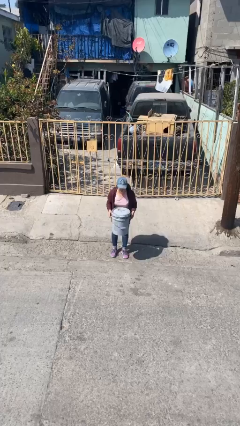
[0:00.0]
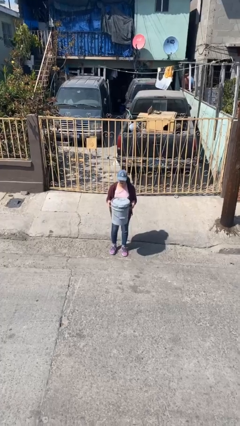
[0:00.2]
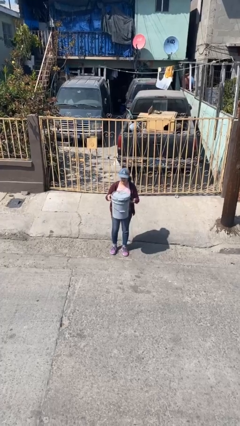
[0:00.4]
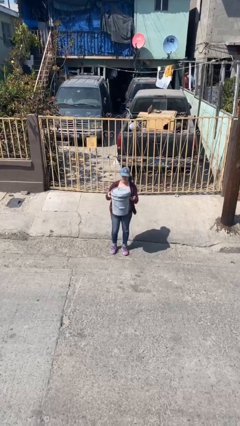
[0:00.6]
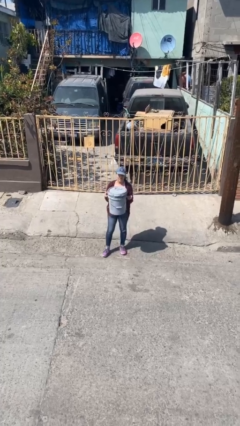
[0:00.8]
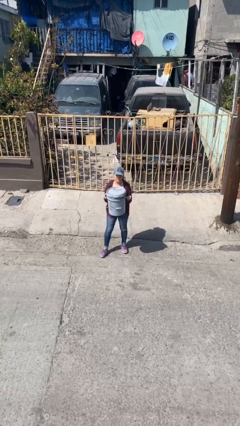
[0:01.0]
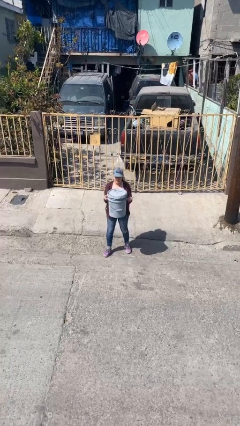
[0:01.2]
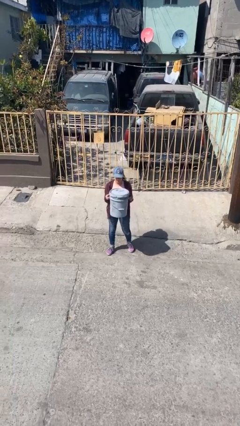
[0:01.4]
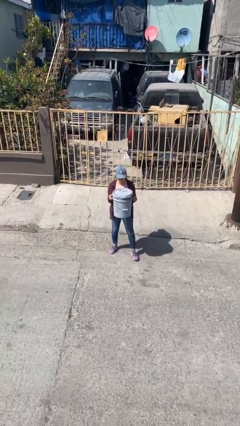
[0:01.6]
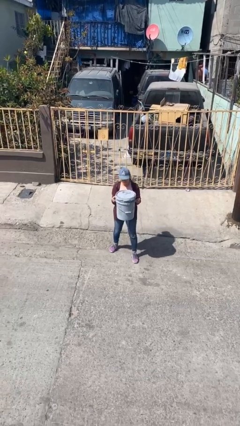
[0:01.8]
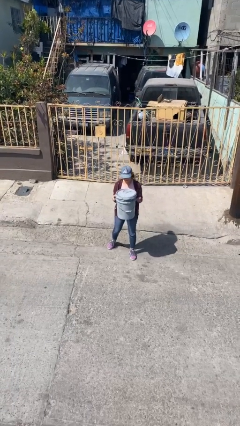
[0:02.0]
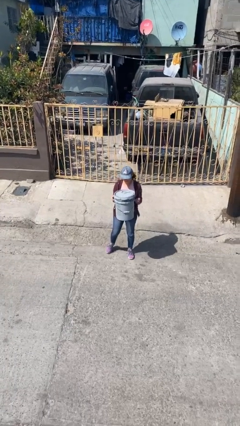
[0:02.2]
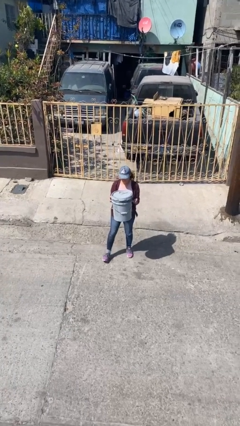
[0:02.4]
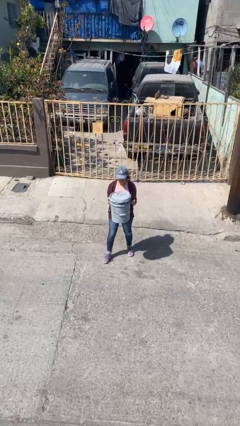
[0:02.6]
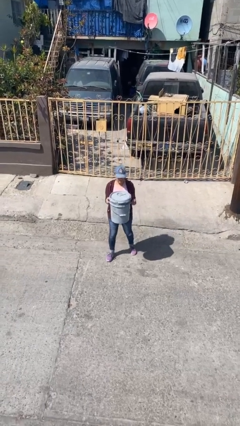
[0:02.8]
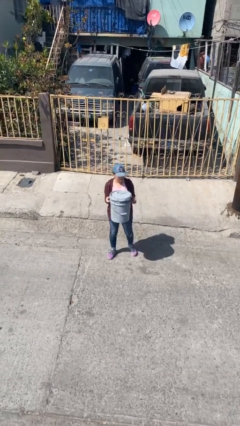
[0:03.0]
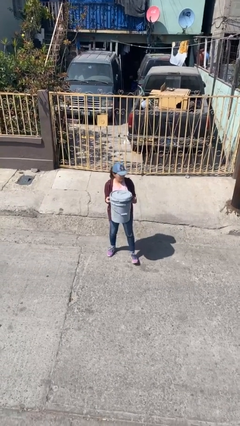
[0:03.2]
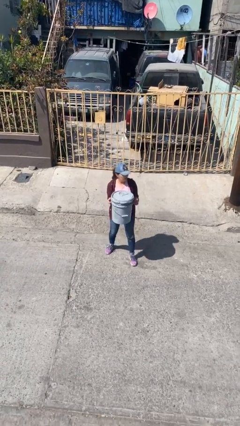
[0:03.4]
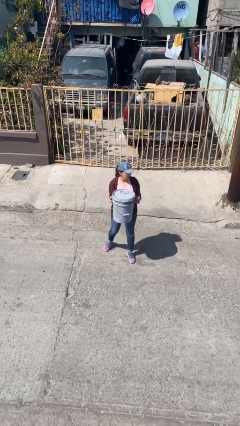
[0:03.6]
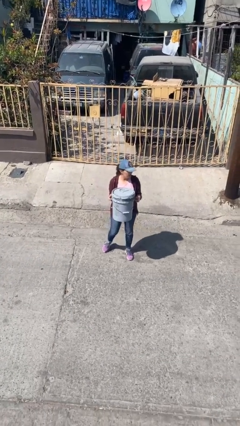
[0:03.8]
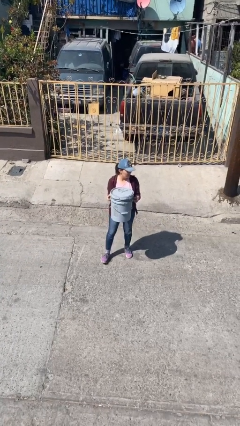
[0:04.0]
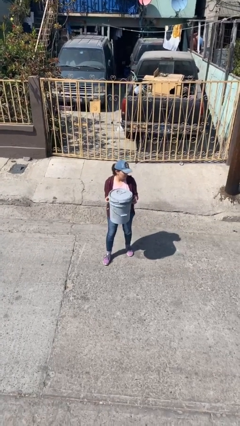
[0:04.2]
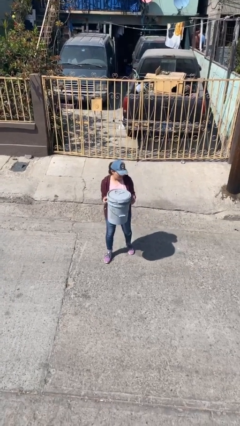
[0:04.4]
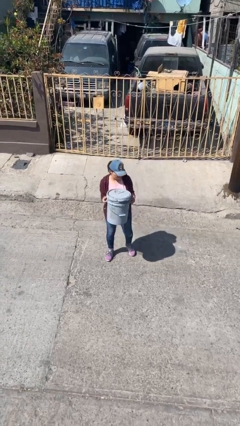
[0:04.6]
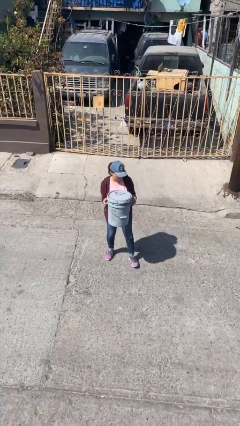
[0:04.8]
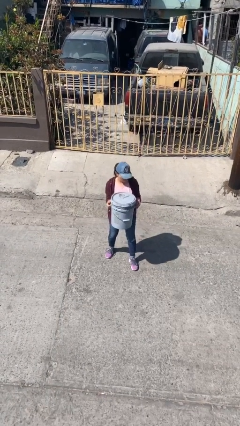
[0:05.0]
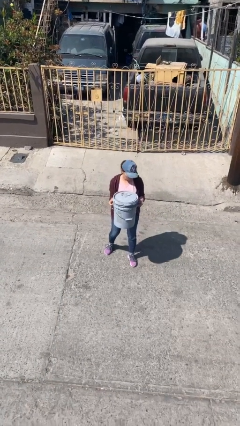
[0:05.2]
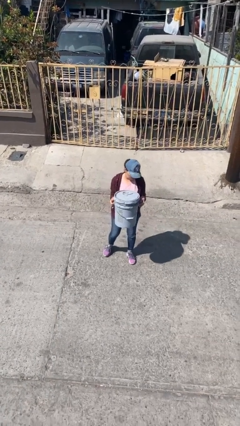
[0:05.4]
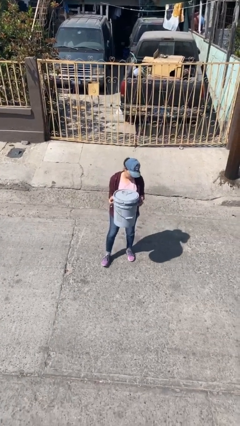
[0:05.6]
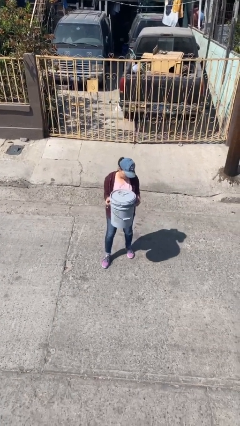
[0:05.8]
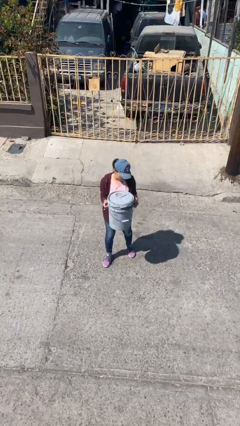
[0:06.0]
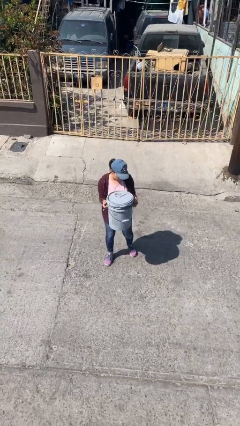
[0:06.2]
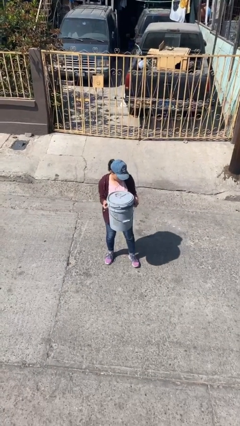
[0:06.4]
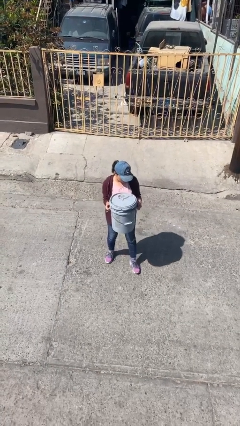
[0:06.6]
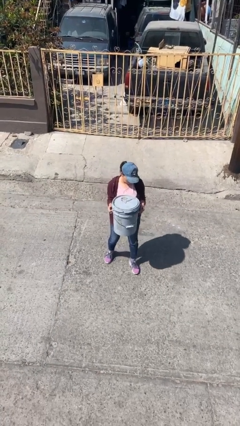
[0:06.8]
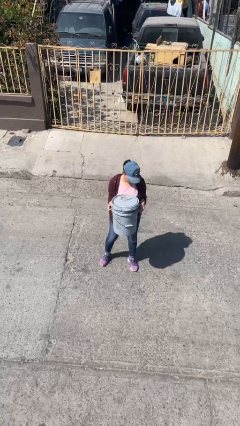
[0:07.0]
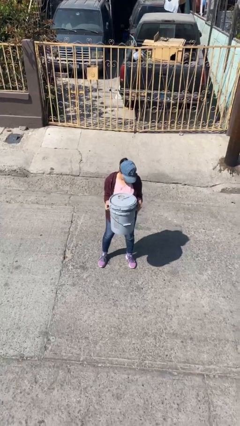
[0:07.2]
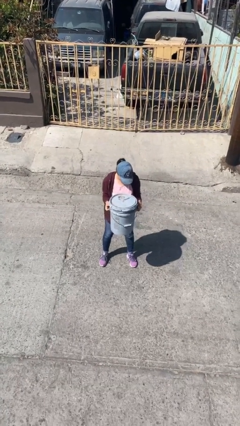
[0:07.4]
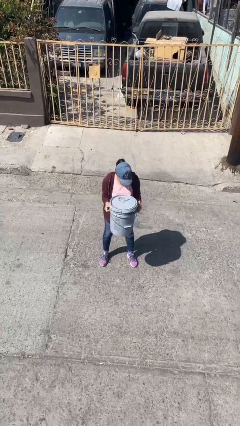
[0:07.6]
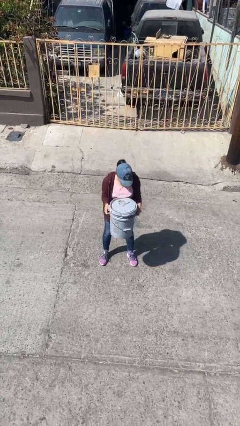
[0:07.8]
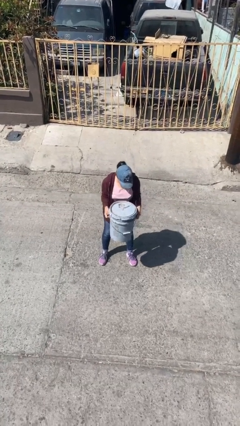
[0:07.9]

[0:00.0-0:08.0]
person carries heavy object

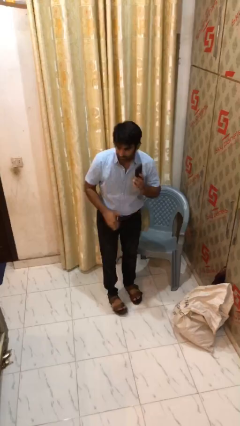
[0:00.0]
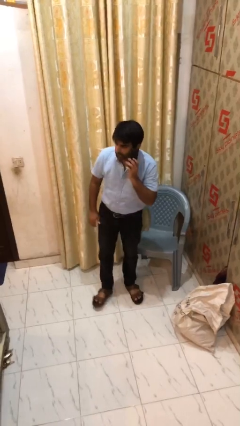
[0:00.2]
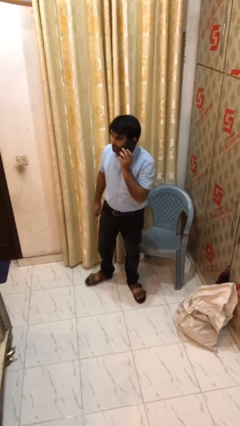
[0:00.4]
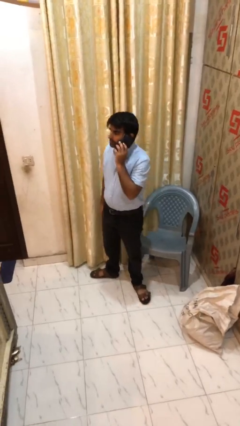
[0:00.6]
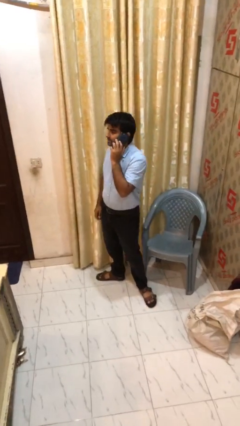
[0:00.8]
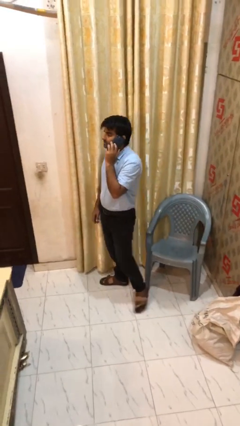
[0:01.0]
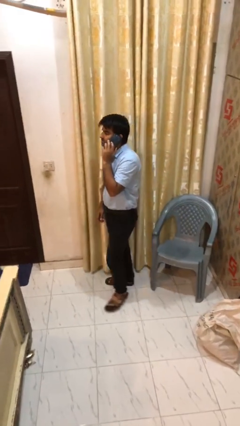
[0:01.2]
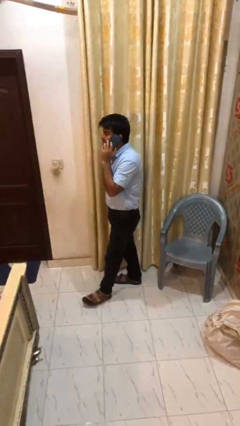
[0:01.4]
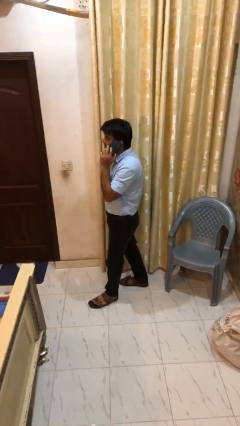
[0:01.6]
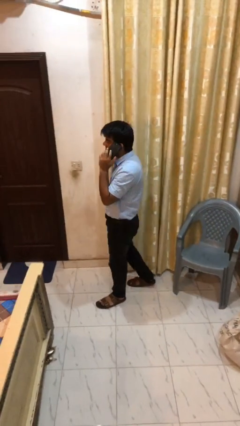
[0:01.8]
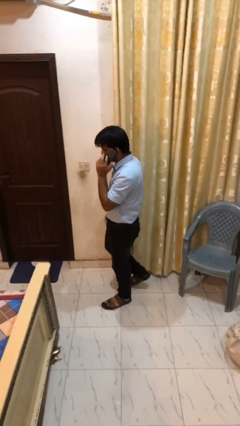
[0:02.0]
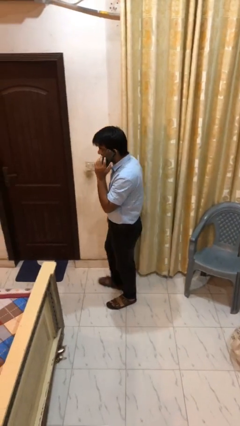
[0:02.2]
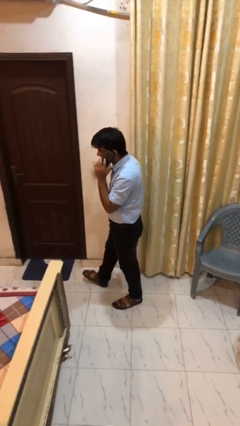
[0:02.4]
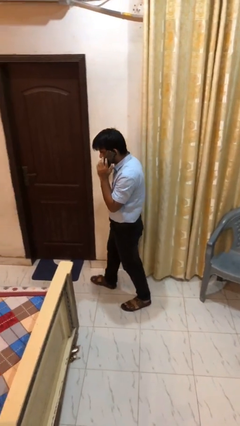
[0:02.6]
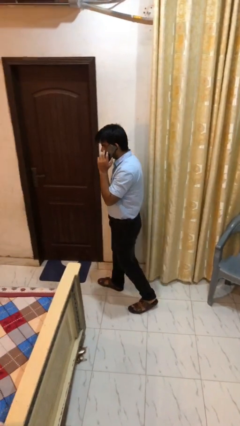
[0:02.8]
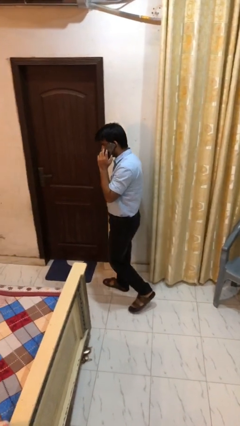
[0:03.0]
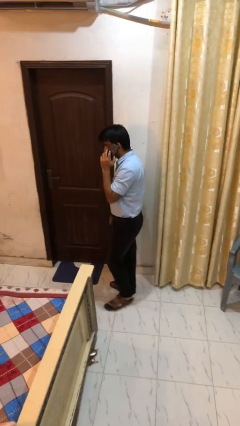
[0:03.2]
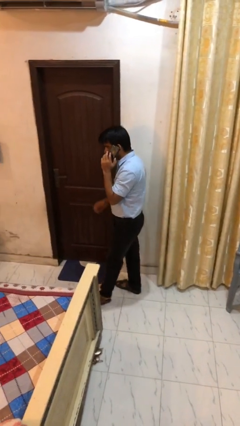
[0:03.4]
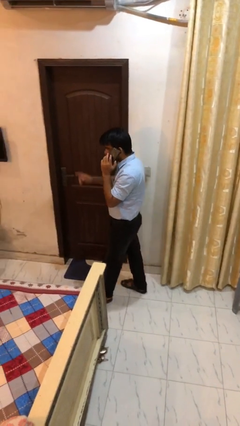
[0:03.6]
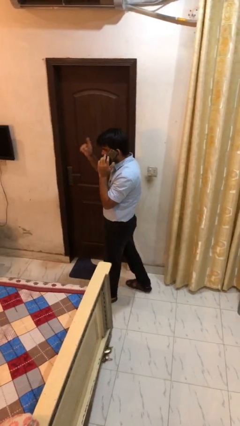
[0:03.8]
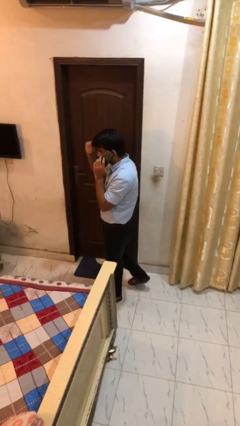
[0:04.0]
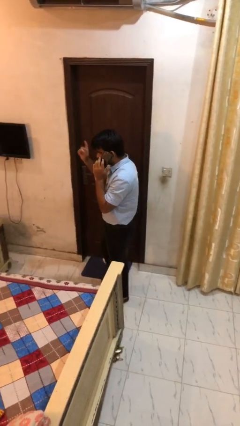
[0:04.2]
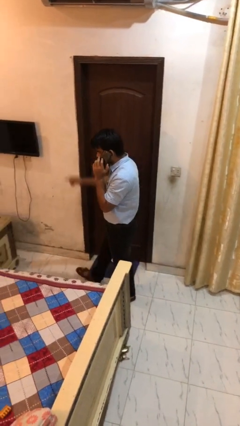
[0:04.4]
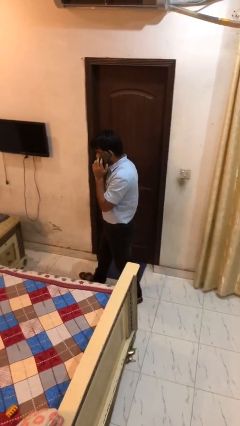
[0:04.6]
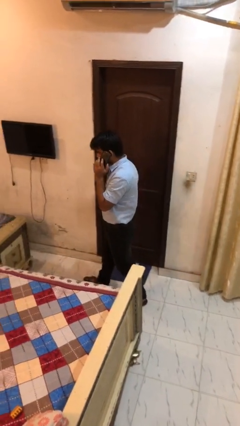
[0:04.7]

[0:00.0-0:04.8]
person talks on phone

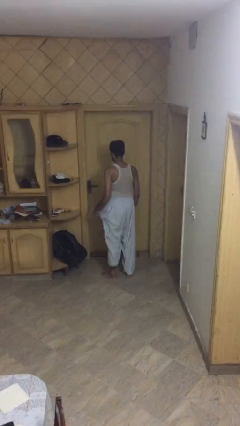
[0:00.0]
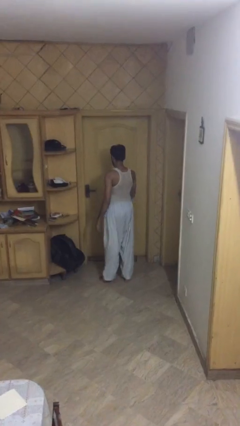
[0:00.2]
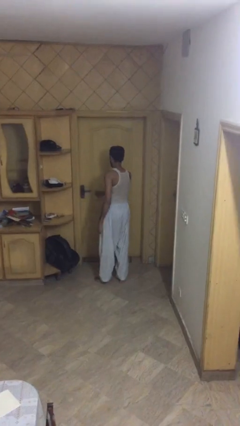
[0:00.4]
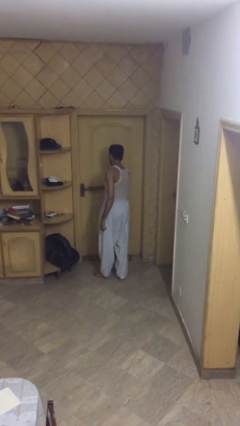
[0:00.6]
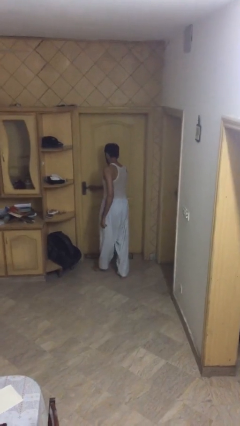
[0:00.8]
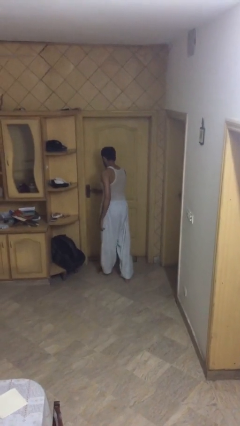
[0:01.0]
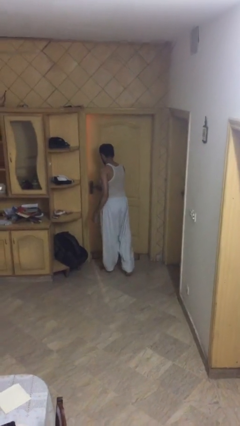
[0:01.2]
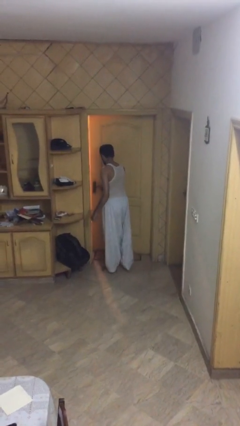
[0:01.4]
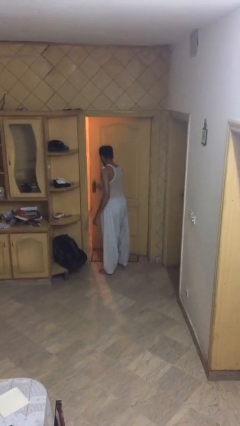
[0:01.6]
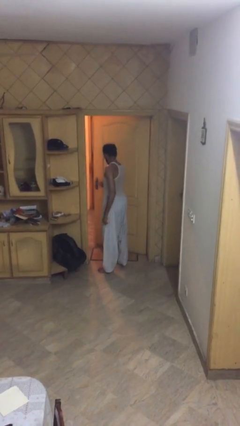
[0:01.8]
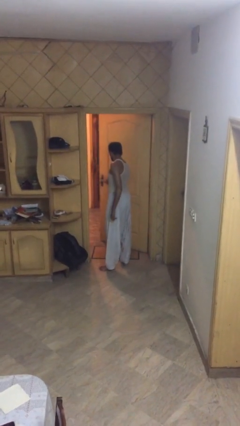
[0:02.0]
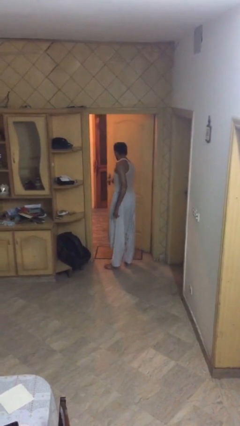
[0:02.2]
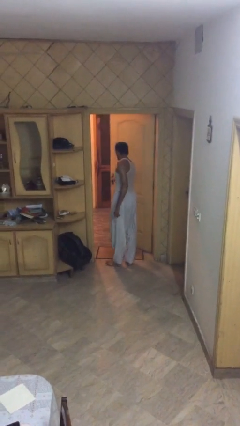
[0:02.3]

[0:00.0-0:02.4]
person opens facility door

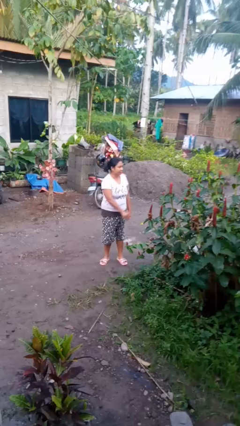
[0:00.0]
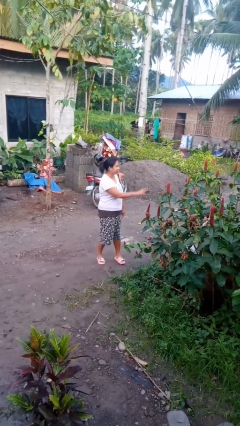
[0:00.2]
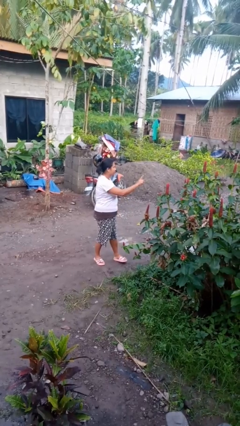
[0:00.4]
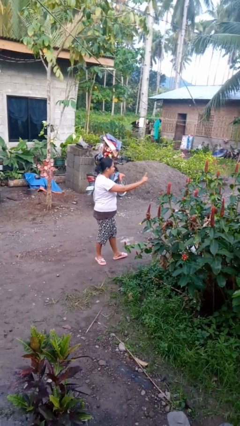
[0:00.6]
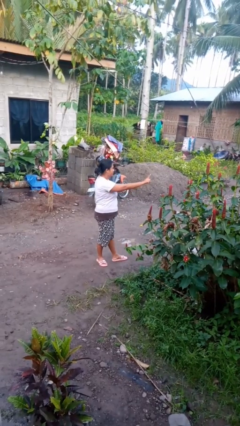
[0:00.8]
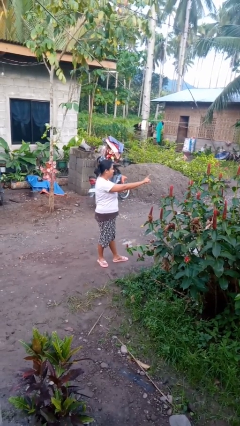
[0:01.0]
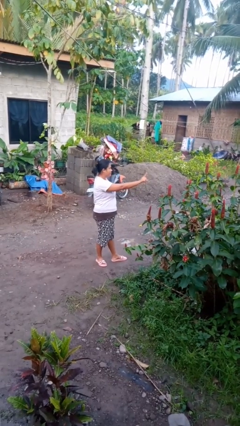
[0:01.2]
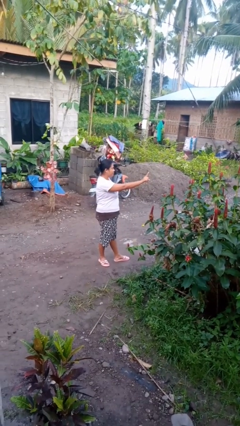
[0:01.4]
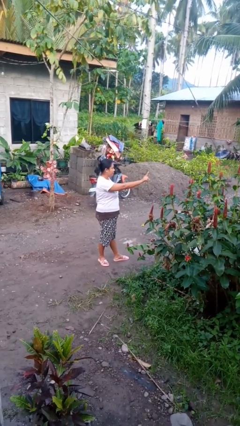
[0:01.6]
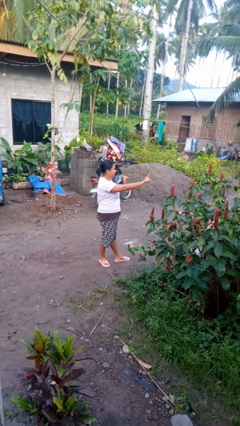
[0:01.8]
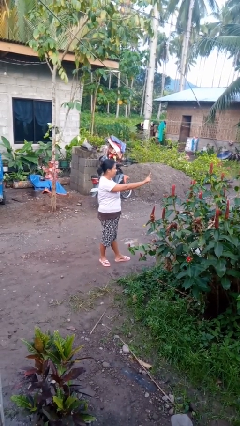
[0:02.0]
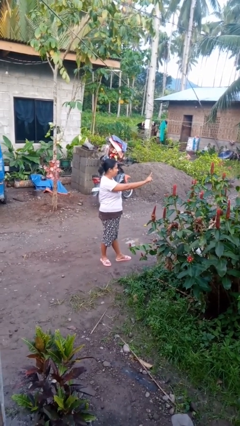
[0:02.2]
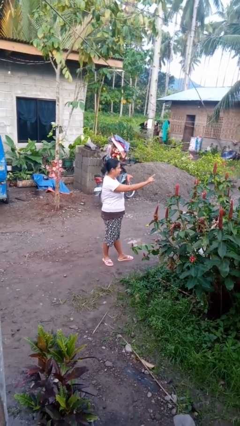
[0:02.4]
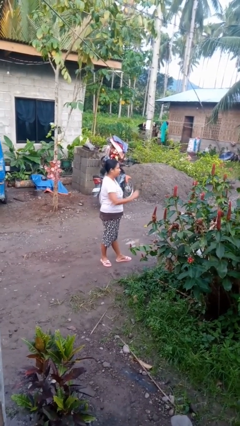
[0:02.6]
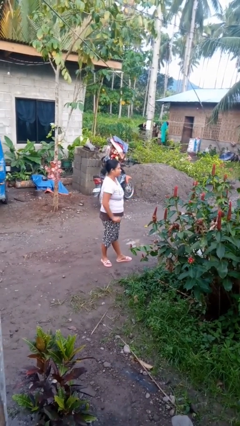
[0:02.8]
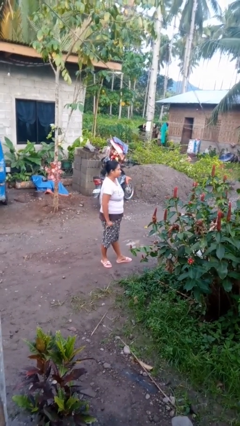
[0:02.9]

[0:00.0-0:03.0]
person gestures number one
